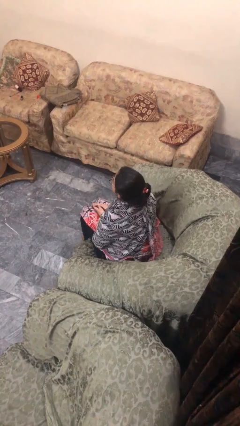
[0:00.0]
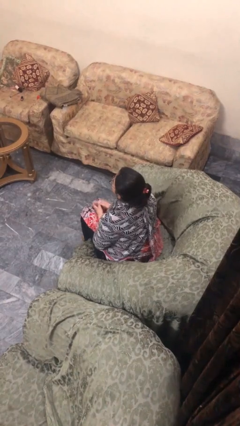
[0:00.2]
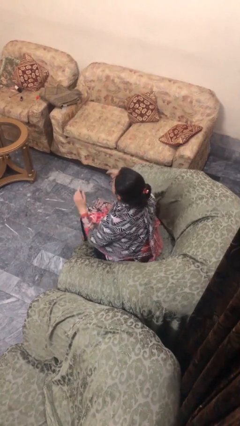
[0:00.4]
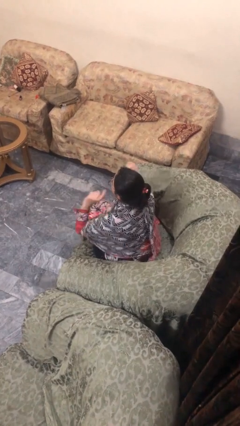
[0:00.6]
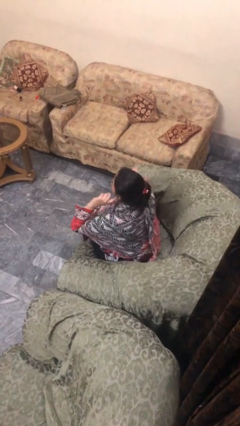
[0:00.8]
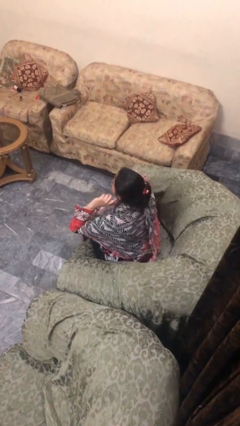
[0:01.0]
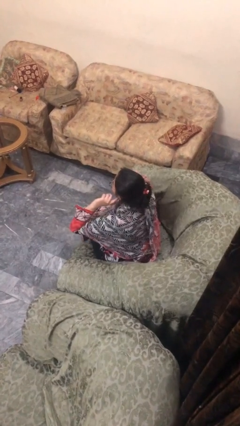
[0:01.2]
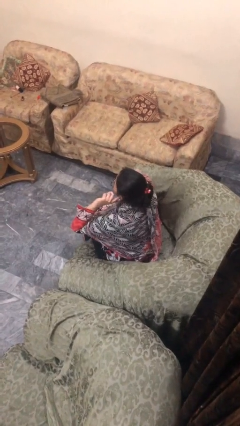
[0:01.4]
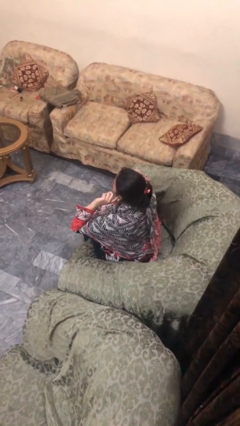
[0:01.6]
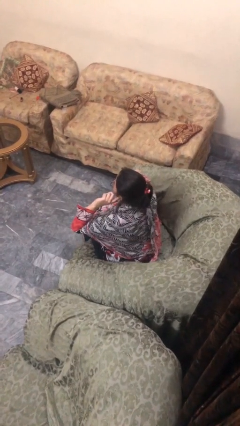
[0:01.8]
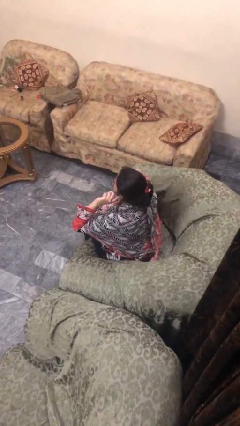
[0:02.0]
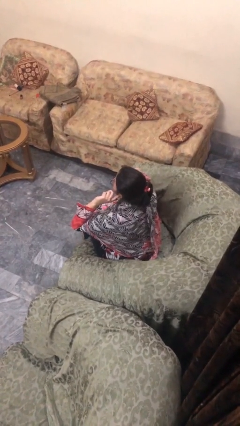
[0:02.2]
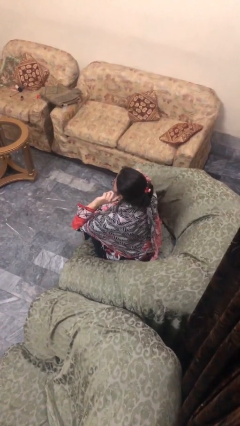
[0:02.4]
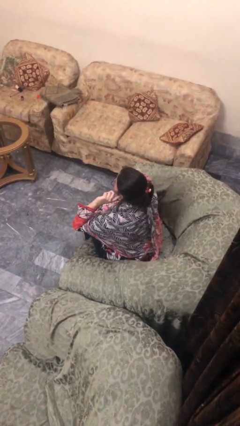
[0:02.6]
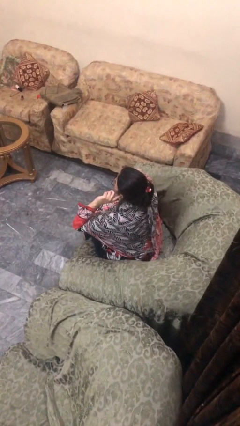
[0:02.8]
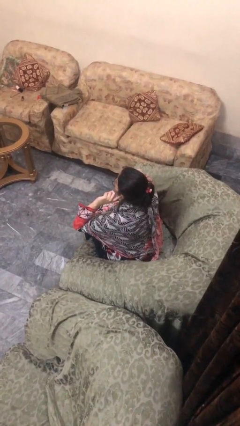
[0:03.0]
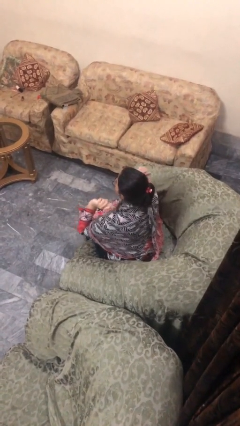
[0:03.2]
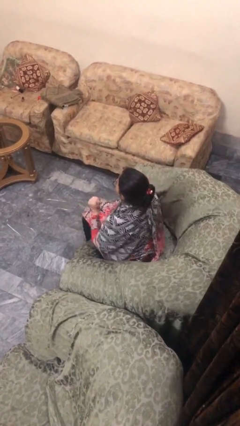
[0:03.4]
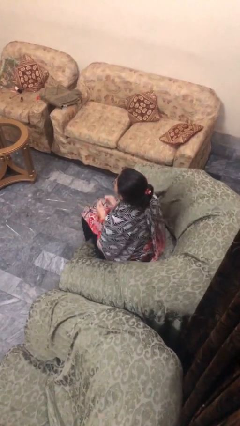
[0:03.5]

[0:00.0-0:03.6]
person puts fingers in ear

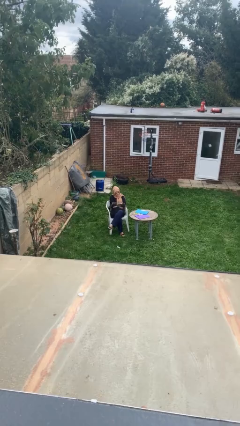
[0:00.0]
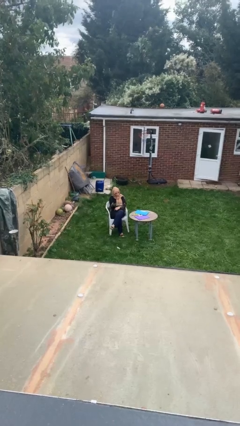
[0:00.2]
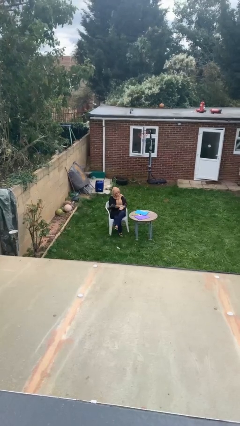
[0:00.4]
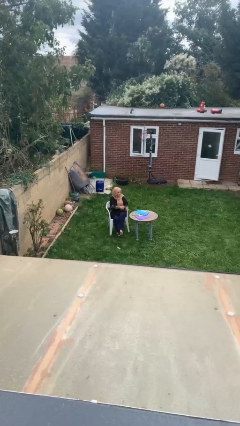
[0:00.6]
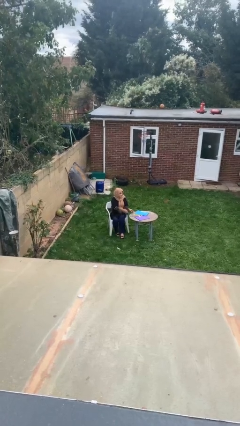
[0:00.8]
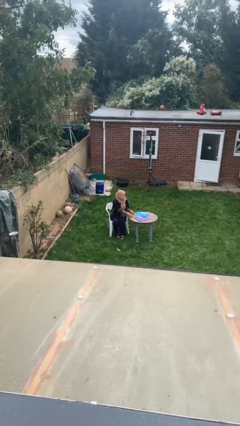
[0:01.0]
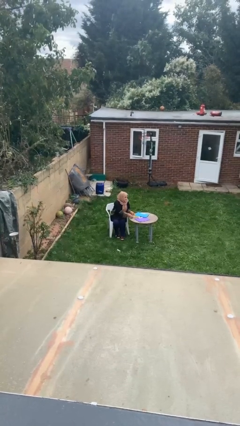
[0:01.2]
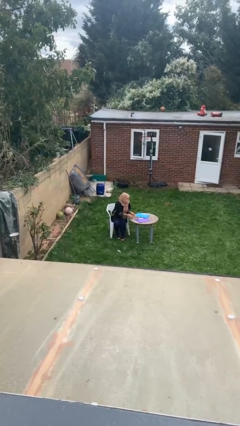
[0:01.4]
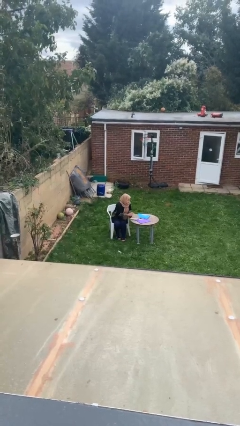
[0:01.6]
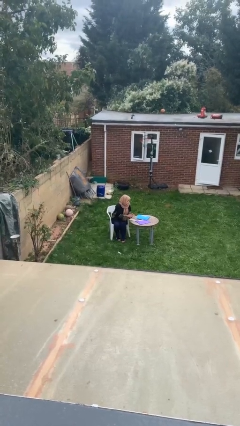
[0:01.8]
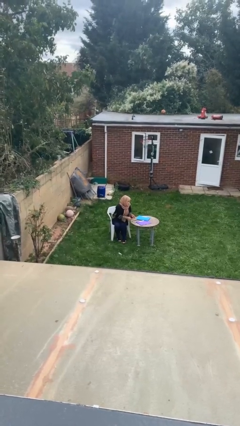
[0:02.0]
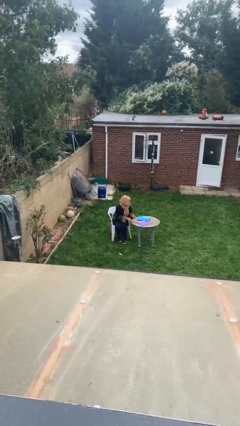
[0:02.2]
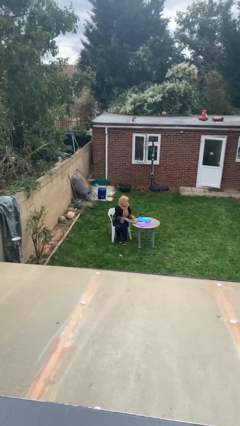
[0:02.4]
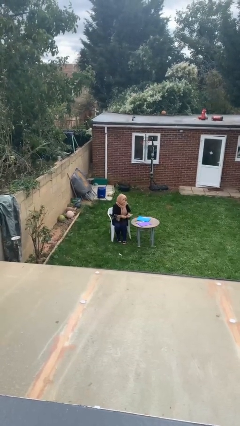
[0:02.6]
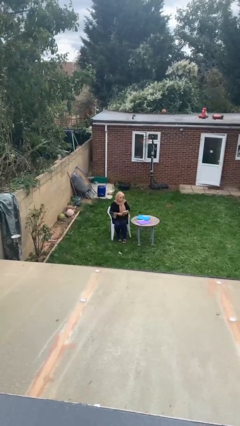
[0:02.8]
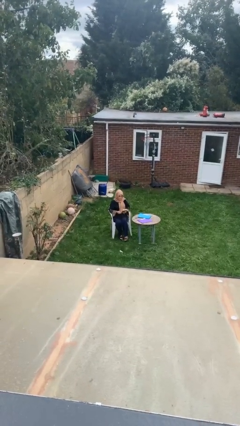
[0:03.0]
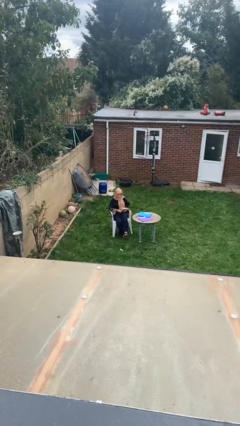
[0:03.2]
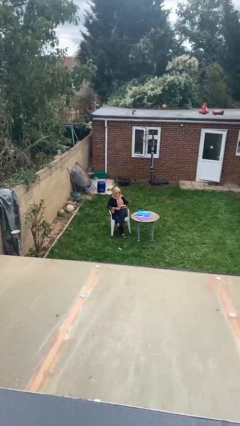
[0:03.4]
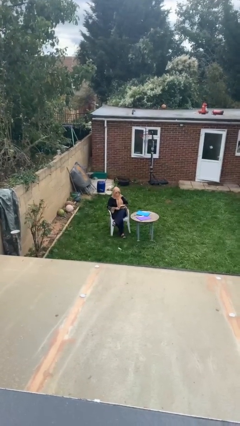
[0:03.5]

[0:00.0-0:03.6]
person picks up object from table

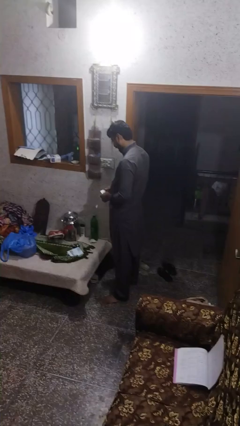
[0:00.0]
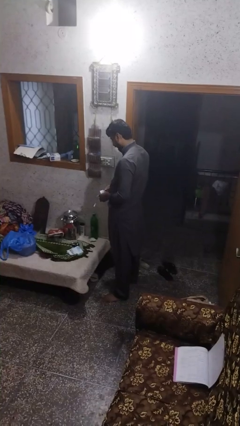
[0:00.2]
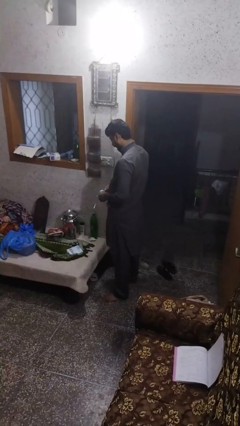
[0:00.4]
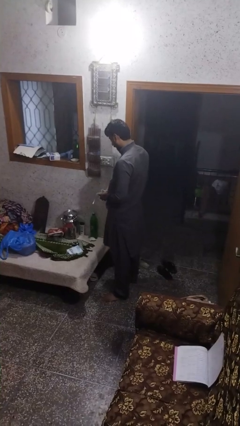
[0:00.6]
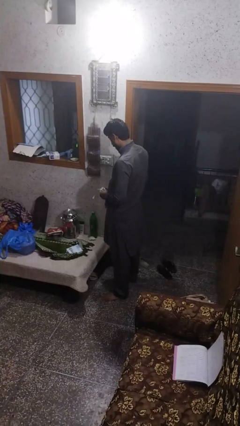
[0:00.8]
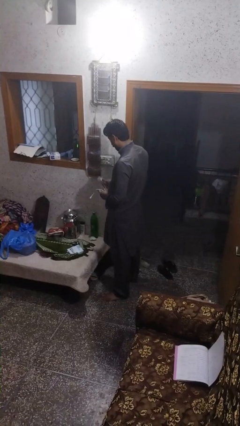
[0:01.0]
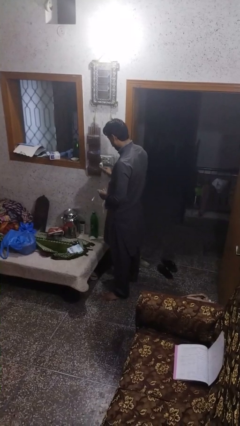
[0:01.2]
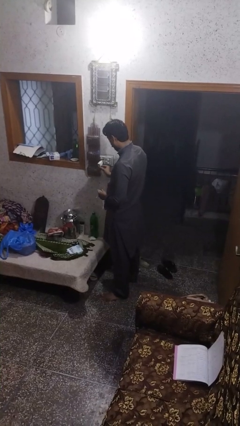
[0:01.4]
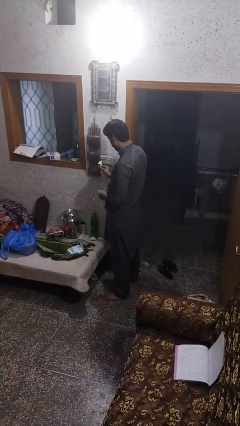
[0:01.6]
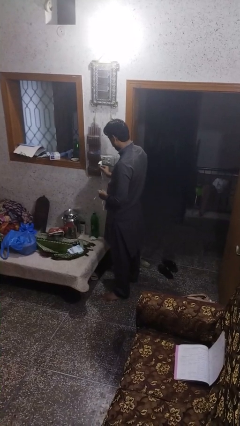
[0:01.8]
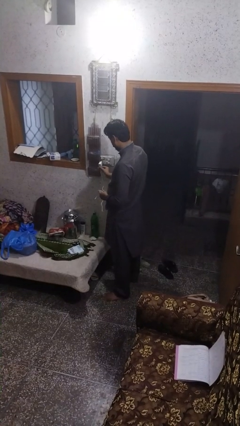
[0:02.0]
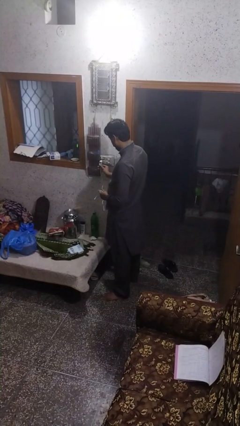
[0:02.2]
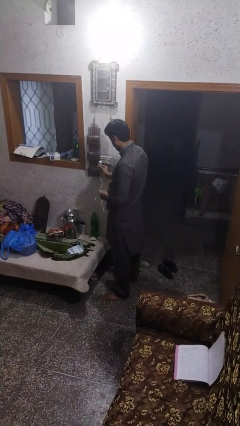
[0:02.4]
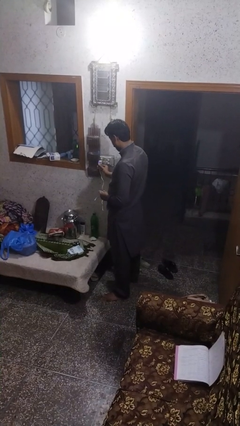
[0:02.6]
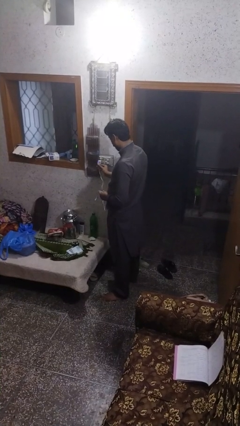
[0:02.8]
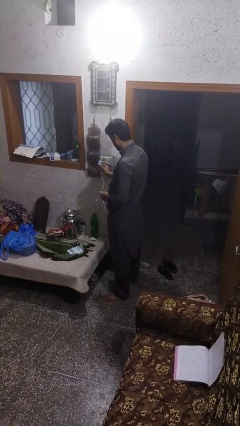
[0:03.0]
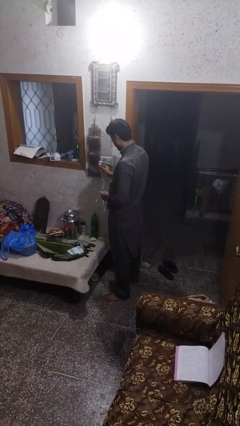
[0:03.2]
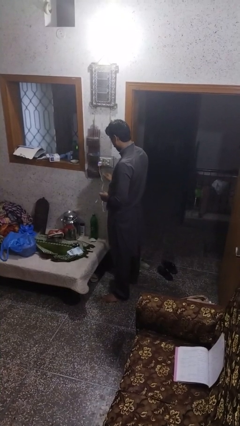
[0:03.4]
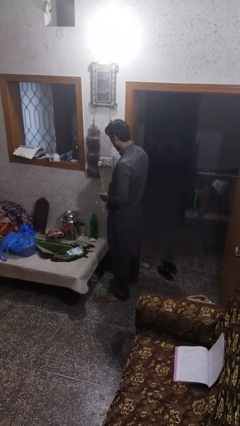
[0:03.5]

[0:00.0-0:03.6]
person plugs into electrical socket

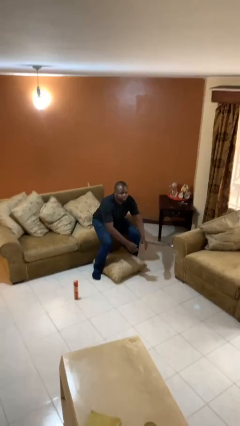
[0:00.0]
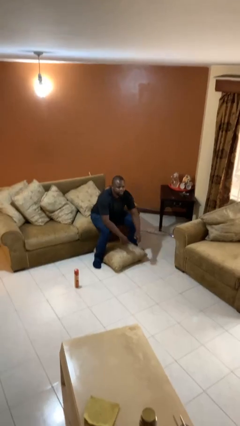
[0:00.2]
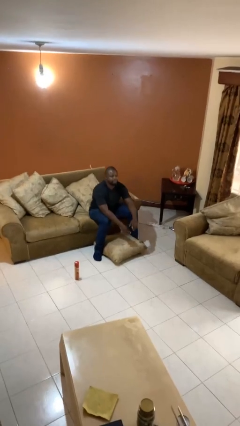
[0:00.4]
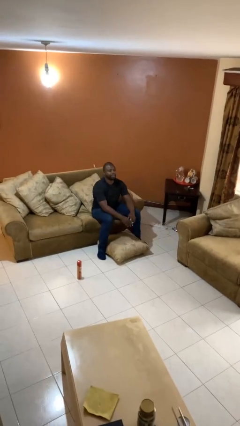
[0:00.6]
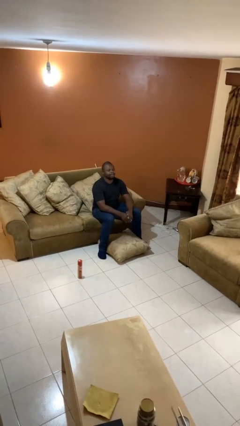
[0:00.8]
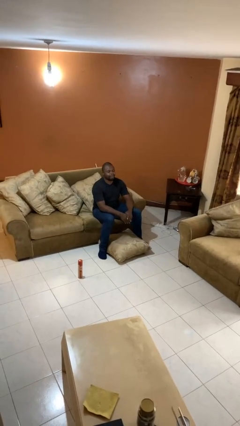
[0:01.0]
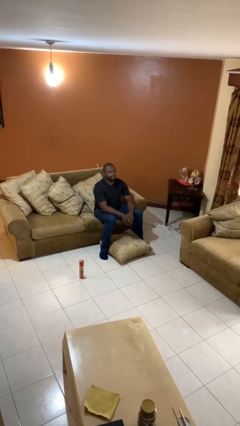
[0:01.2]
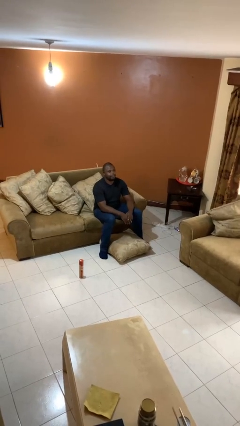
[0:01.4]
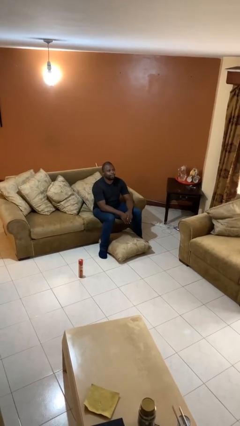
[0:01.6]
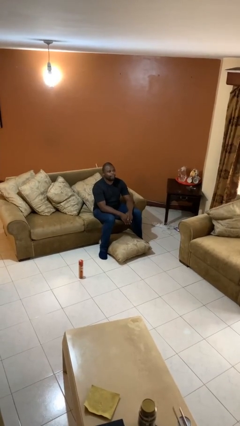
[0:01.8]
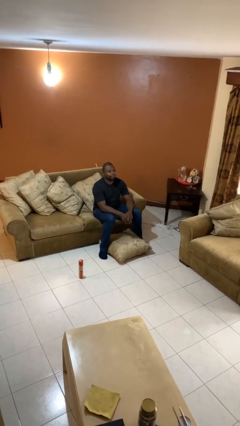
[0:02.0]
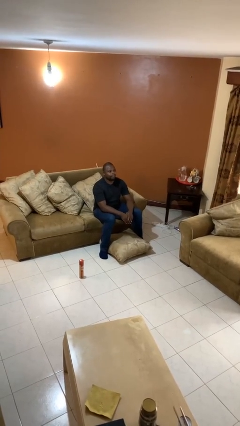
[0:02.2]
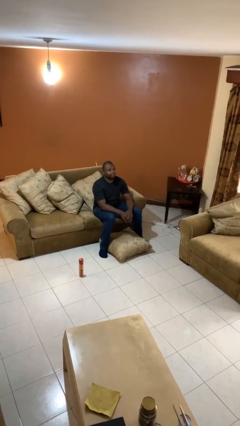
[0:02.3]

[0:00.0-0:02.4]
person sits down

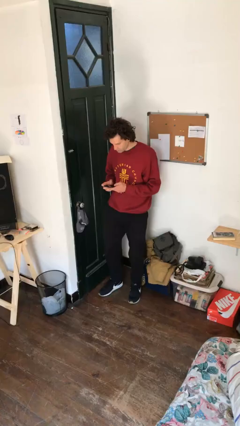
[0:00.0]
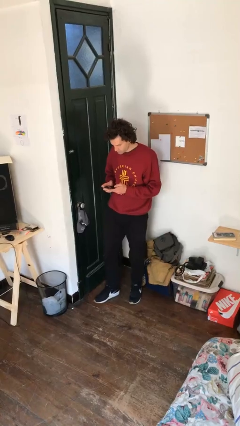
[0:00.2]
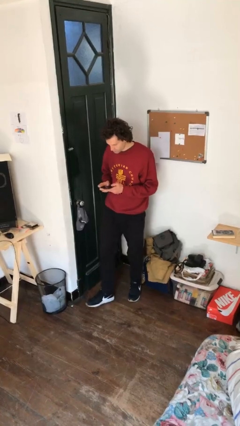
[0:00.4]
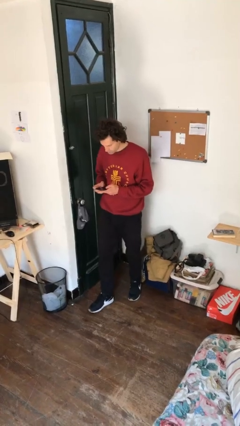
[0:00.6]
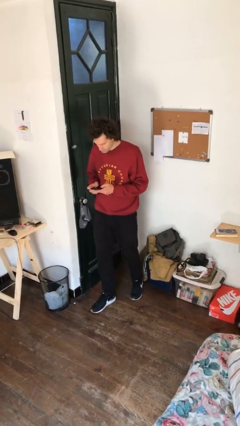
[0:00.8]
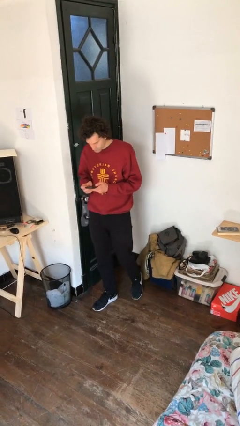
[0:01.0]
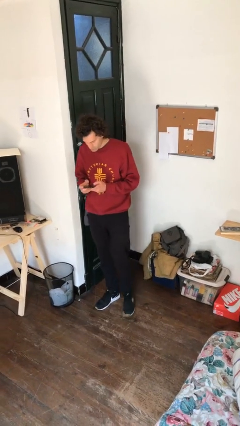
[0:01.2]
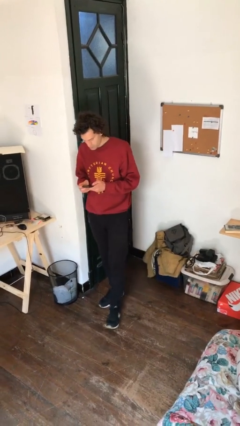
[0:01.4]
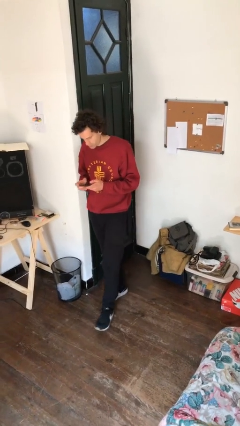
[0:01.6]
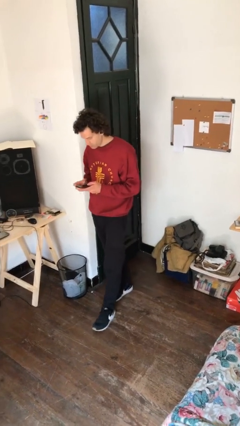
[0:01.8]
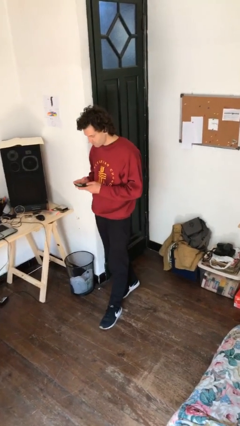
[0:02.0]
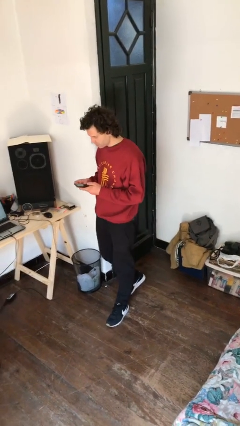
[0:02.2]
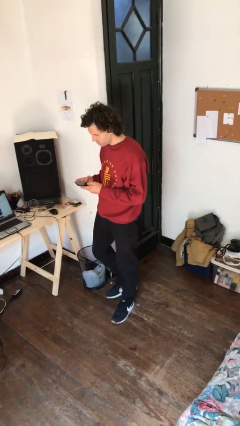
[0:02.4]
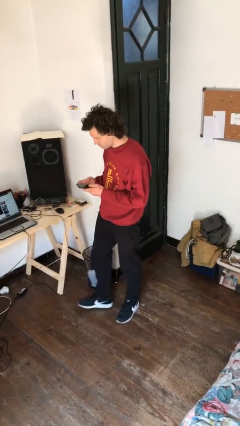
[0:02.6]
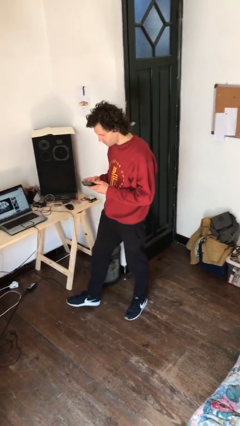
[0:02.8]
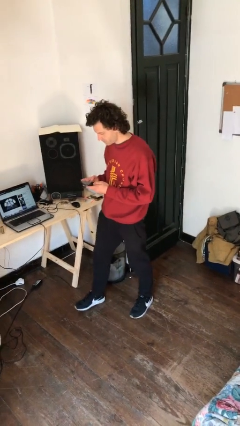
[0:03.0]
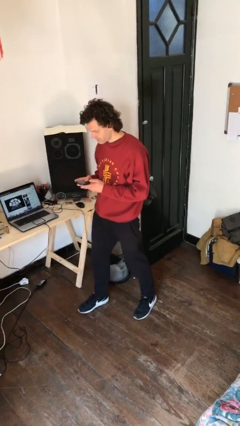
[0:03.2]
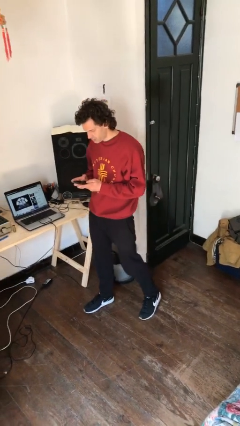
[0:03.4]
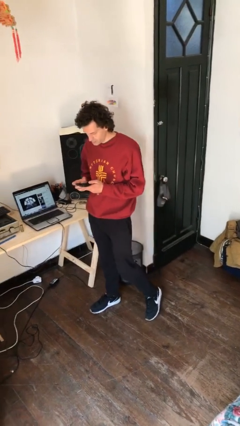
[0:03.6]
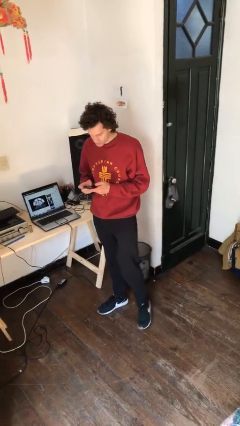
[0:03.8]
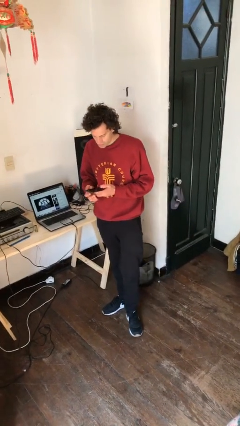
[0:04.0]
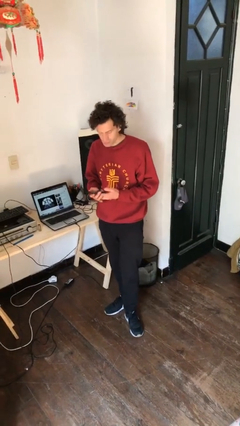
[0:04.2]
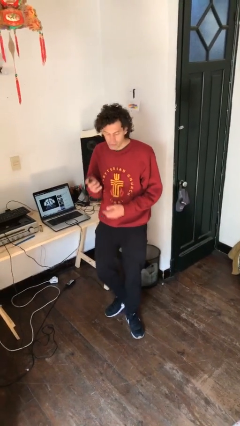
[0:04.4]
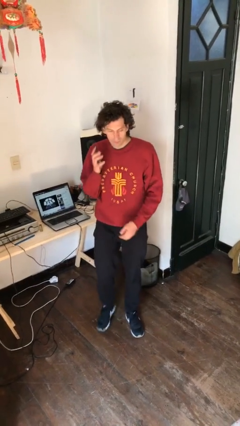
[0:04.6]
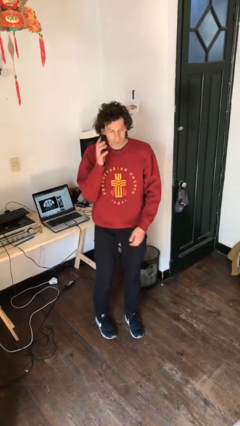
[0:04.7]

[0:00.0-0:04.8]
person texts on phone
